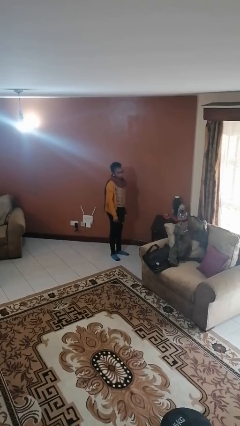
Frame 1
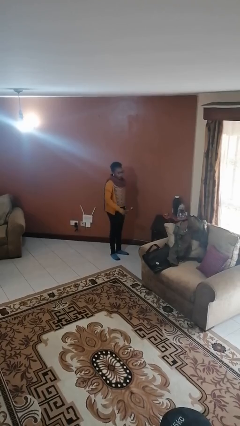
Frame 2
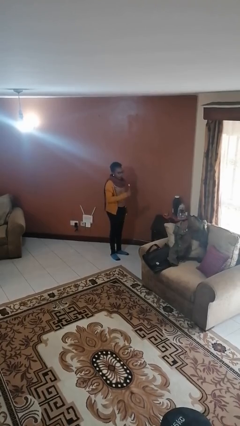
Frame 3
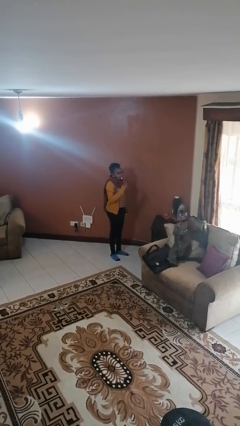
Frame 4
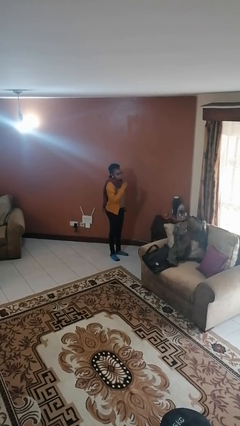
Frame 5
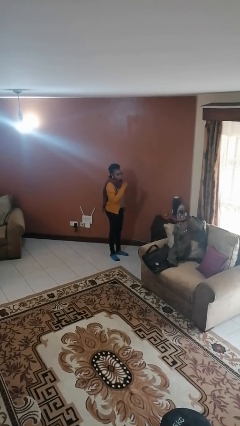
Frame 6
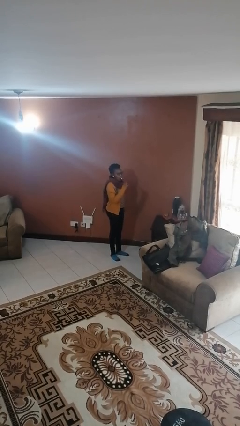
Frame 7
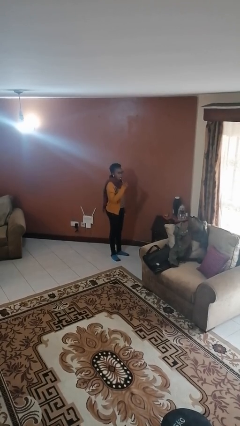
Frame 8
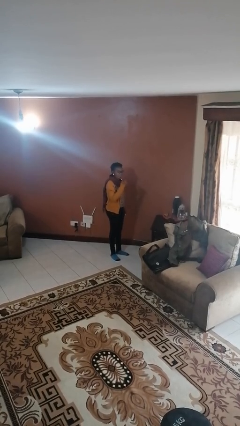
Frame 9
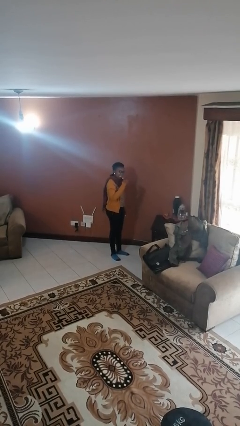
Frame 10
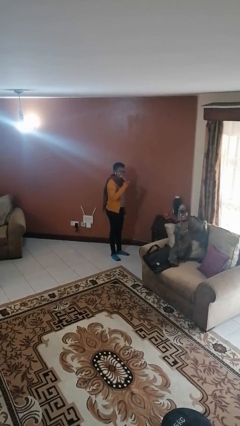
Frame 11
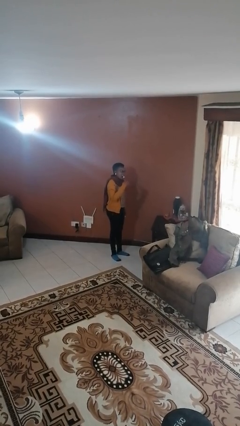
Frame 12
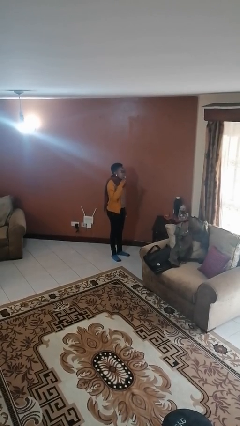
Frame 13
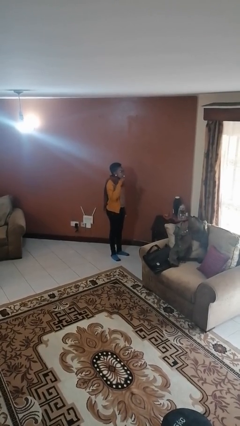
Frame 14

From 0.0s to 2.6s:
person brushes teeth

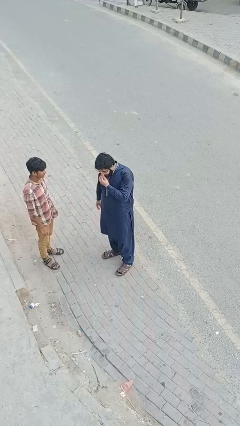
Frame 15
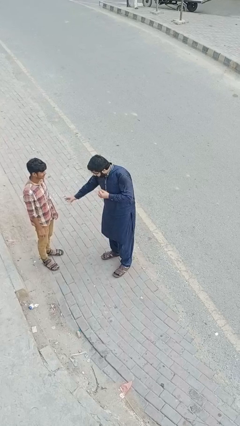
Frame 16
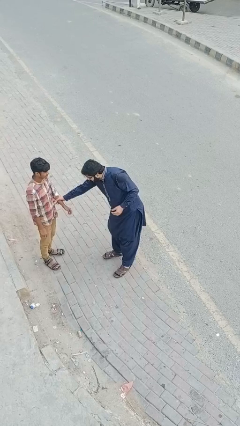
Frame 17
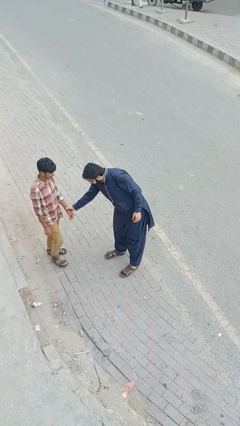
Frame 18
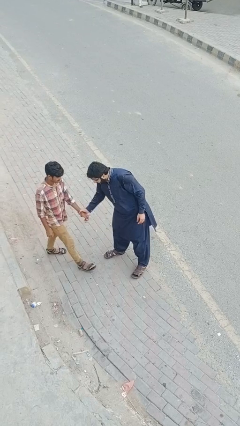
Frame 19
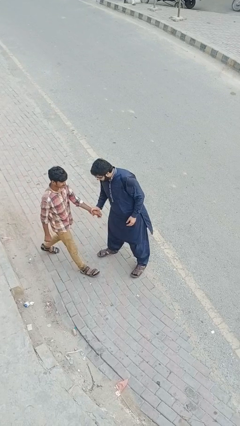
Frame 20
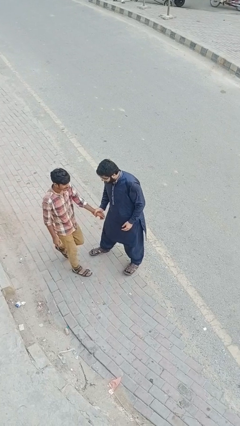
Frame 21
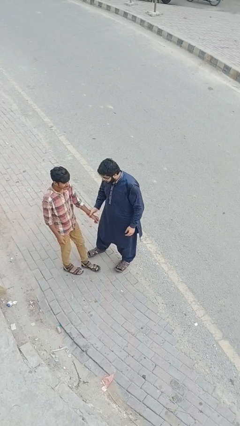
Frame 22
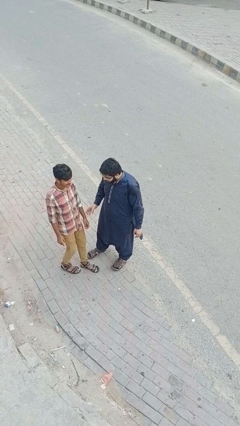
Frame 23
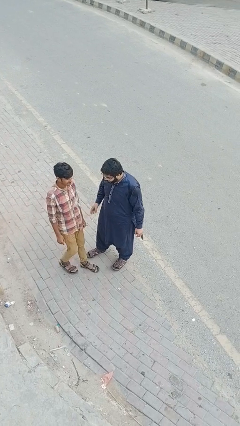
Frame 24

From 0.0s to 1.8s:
person grabs person by forearm

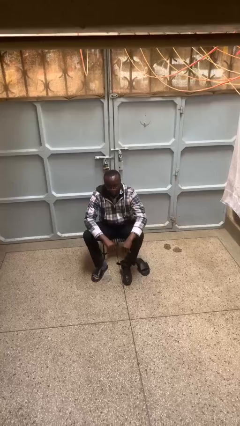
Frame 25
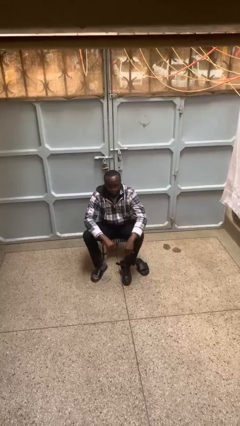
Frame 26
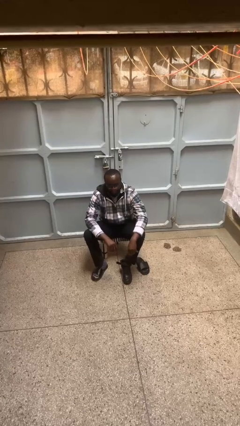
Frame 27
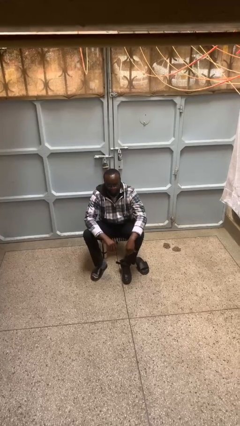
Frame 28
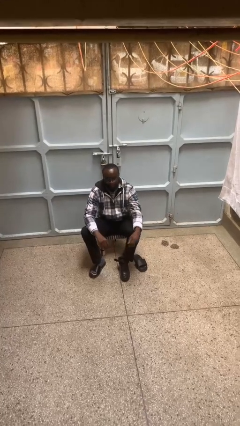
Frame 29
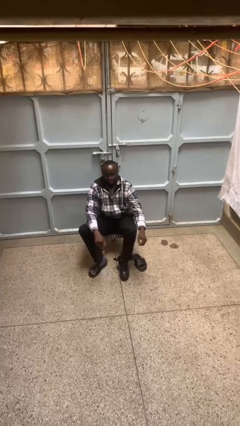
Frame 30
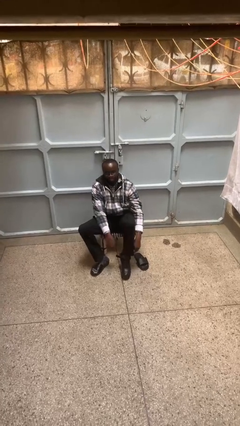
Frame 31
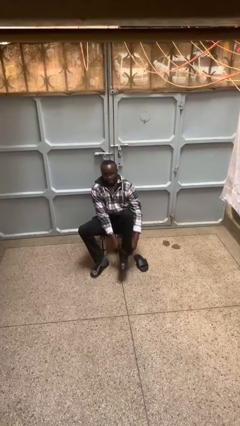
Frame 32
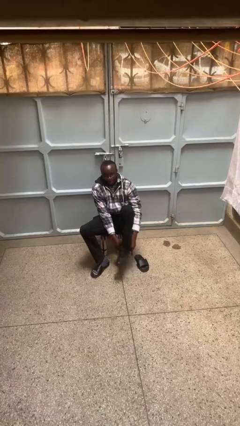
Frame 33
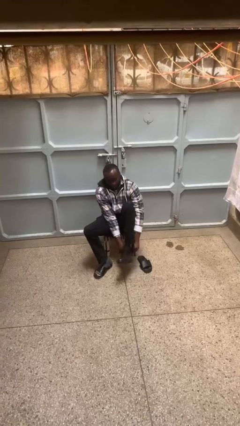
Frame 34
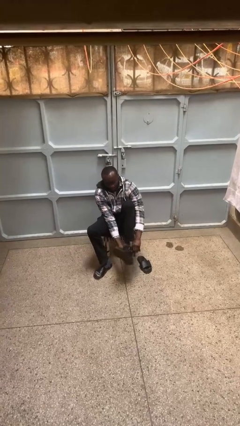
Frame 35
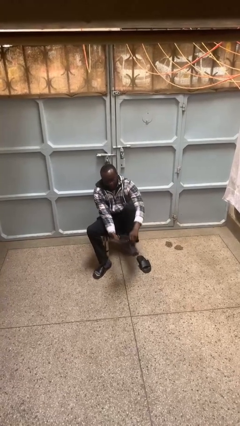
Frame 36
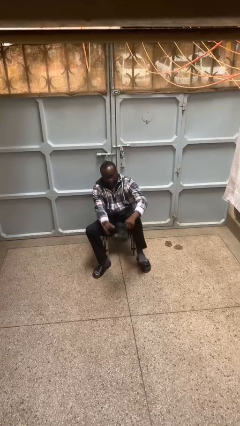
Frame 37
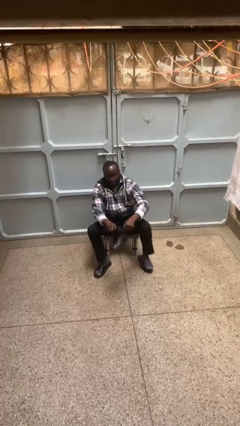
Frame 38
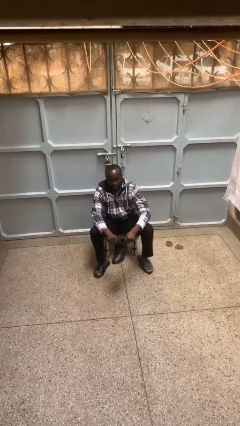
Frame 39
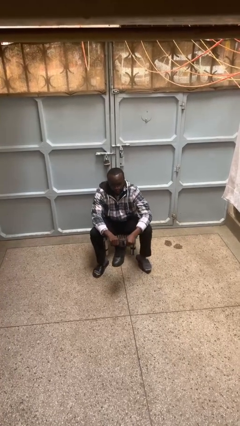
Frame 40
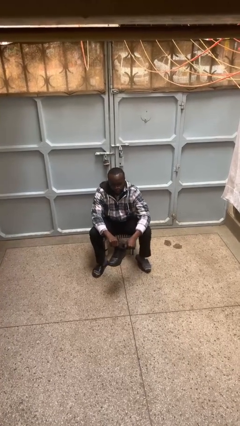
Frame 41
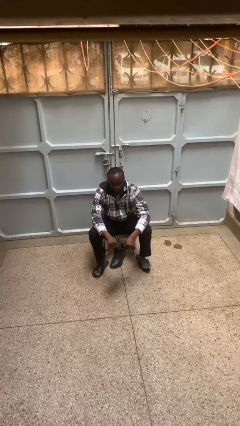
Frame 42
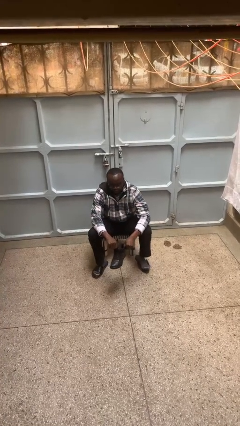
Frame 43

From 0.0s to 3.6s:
person takes off boots

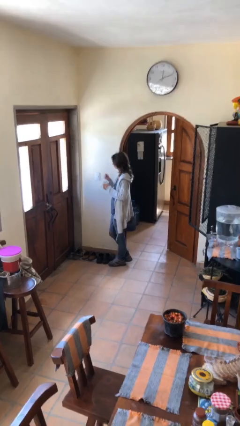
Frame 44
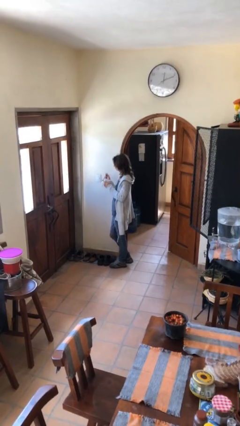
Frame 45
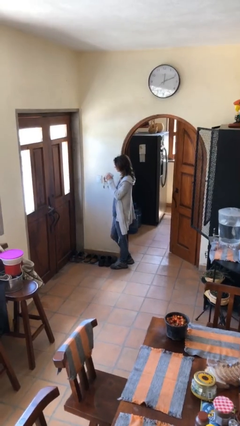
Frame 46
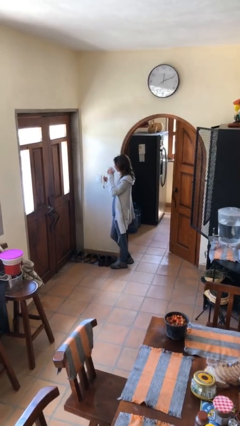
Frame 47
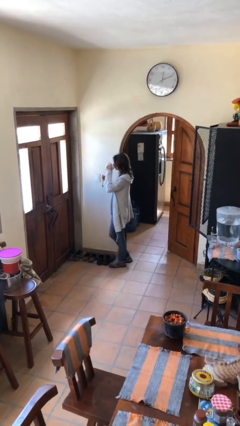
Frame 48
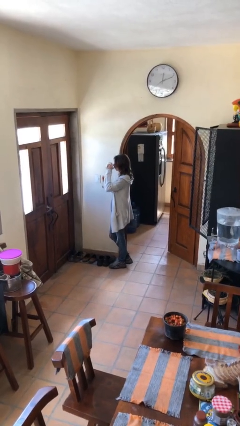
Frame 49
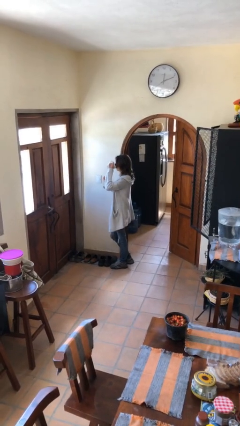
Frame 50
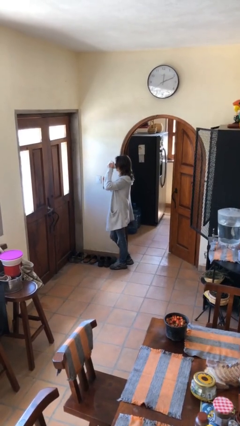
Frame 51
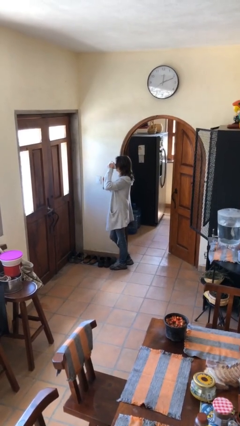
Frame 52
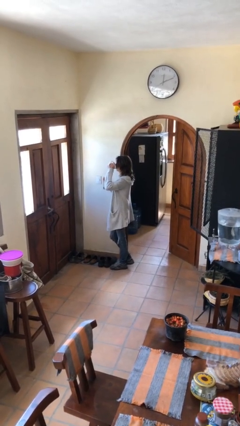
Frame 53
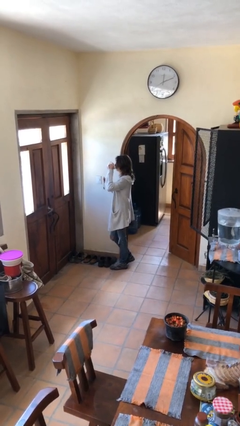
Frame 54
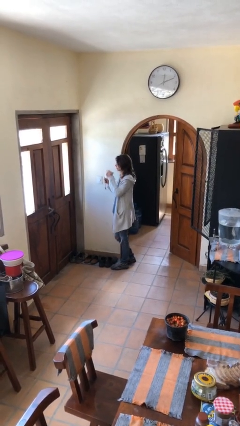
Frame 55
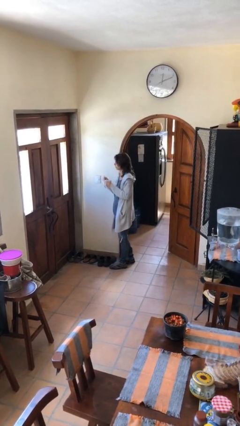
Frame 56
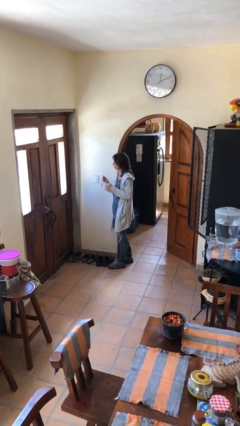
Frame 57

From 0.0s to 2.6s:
person drinks from mug

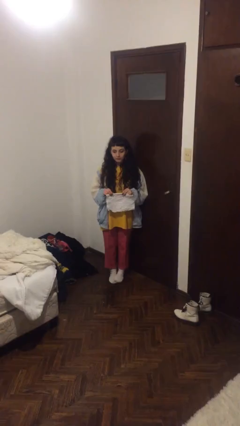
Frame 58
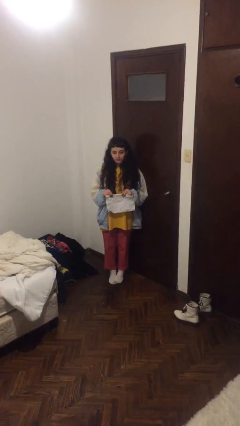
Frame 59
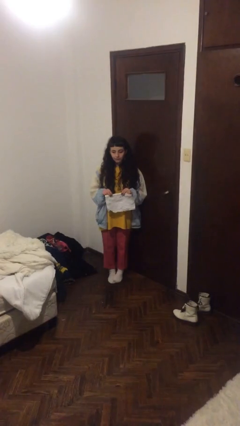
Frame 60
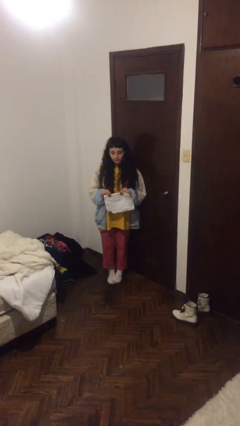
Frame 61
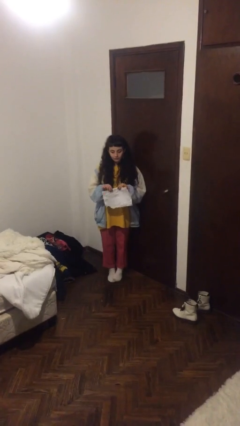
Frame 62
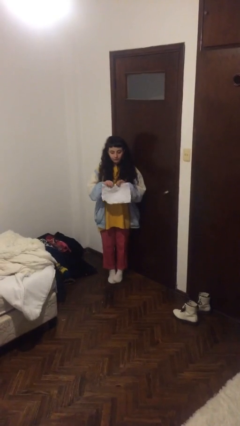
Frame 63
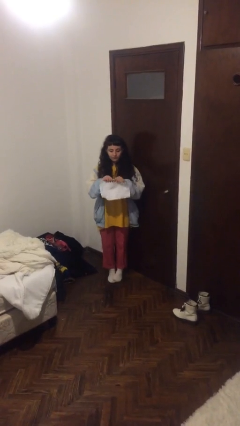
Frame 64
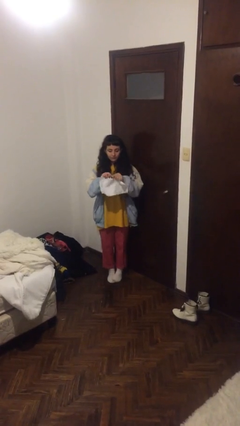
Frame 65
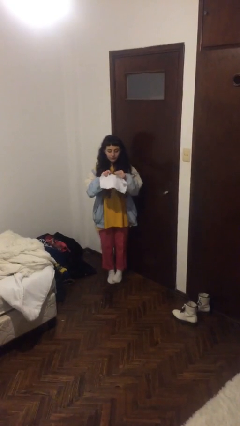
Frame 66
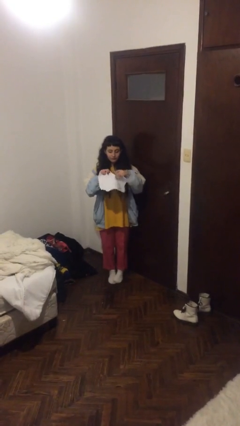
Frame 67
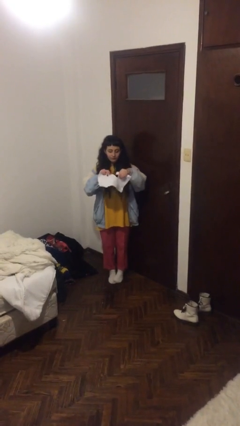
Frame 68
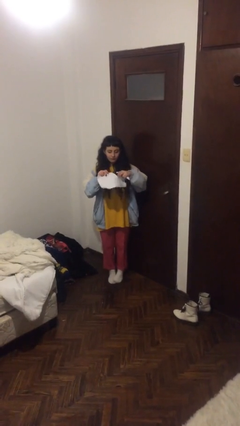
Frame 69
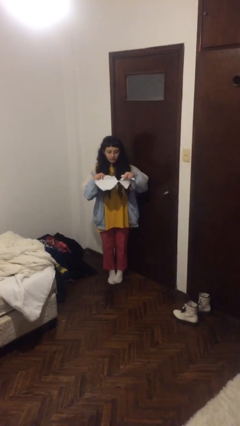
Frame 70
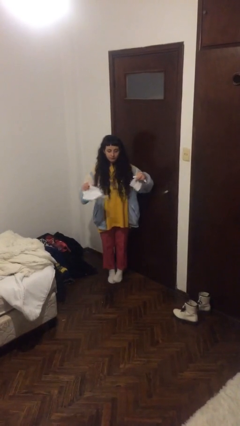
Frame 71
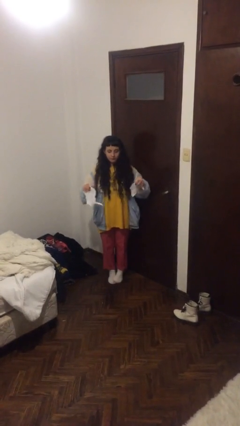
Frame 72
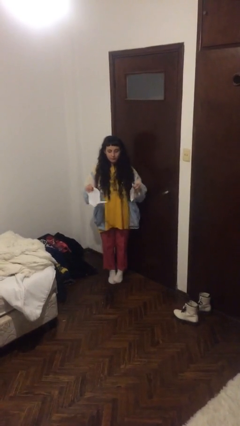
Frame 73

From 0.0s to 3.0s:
person tears paper

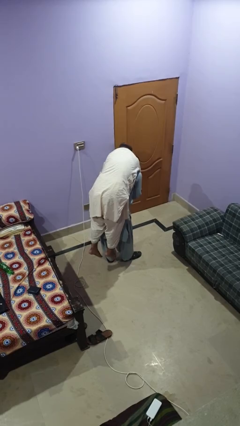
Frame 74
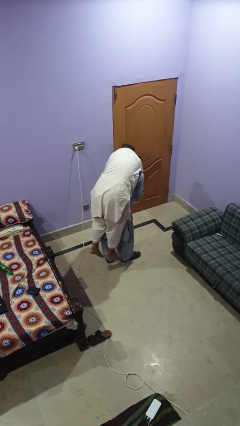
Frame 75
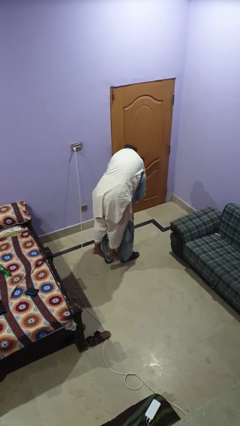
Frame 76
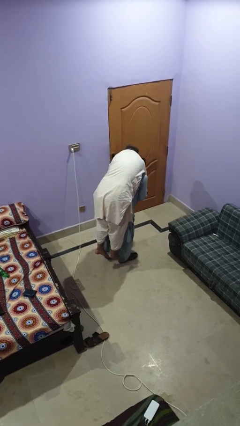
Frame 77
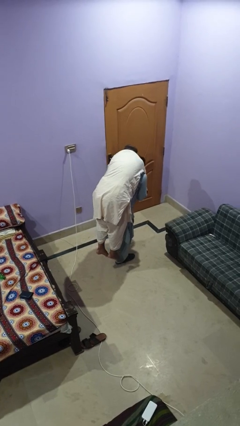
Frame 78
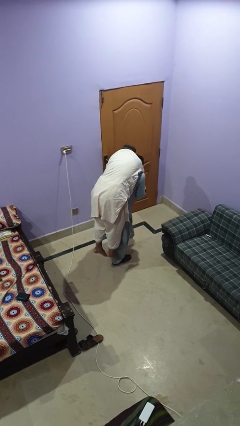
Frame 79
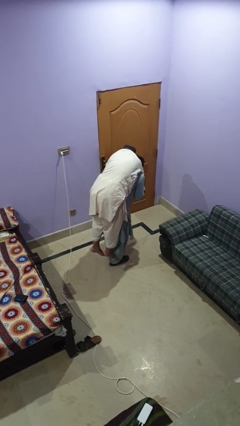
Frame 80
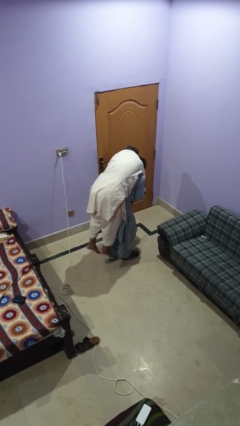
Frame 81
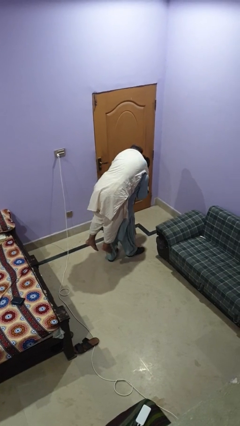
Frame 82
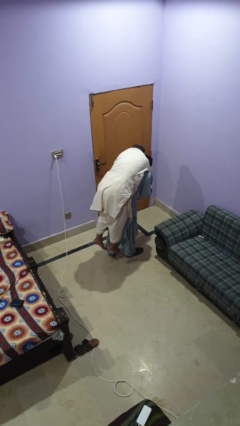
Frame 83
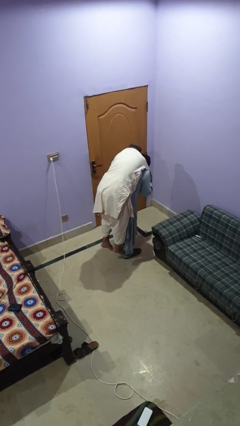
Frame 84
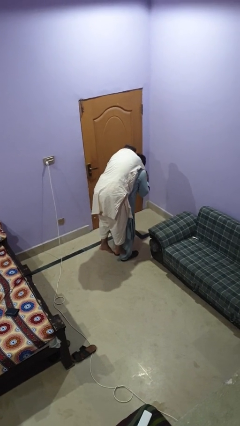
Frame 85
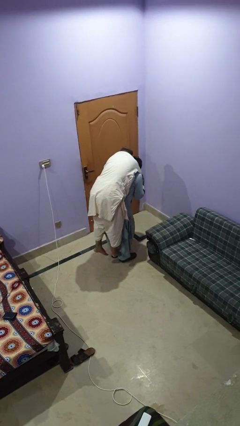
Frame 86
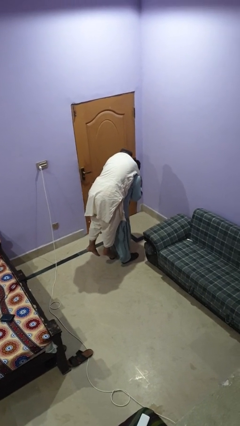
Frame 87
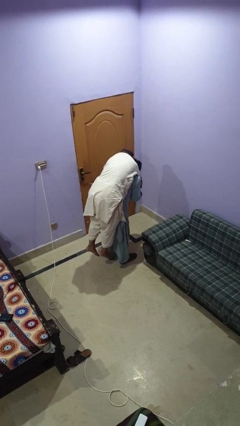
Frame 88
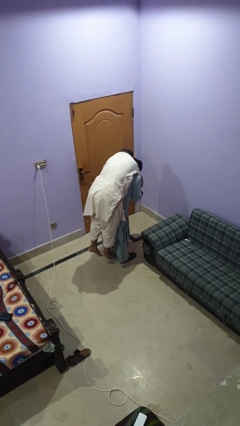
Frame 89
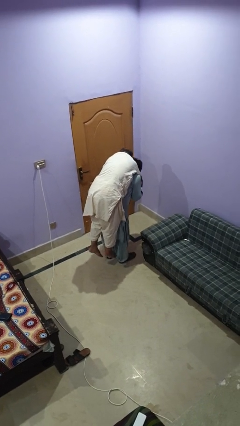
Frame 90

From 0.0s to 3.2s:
person carries person on back

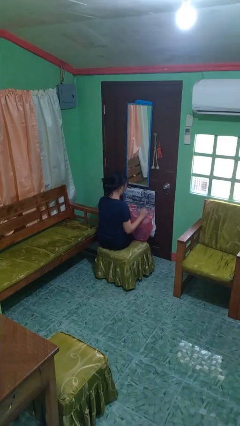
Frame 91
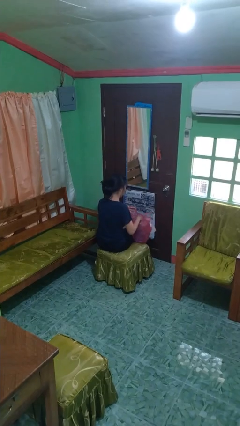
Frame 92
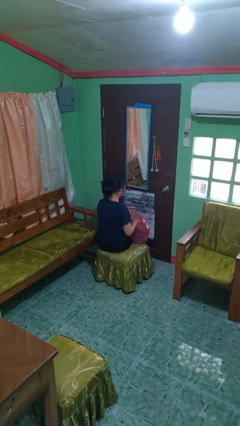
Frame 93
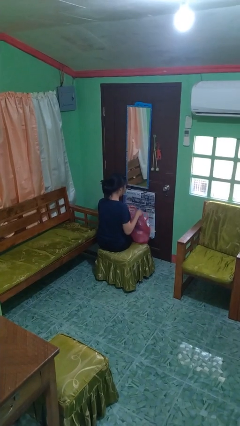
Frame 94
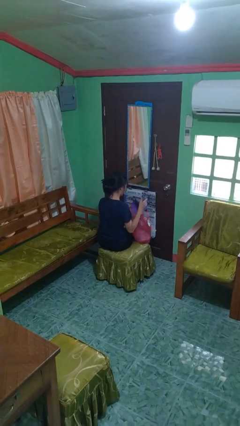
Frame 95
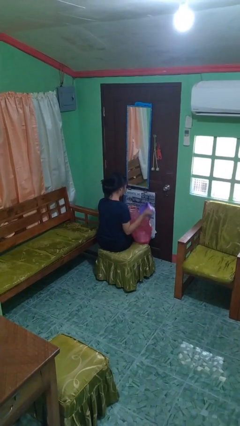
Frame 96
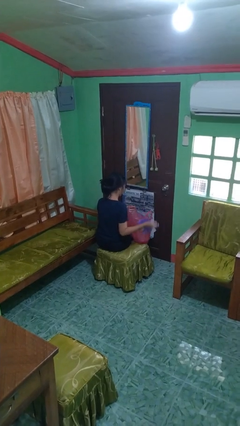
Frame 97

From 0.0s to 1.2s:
person takes object from bag
